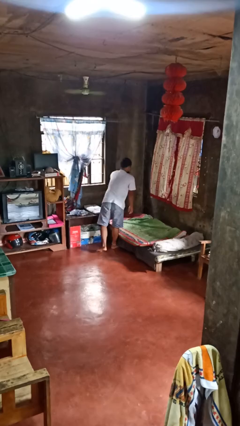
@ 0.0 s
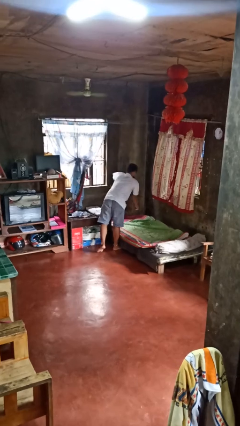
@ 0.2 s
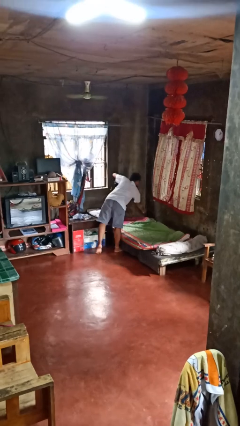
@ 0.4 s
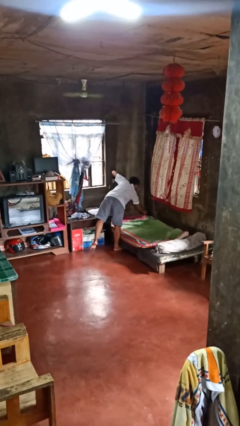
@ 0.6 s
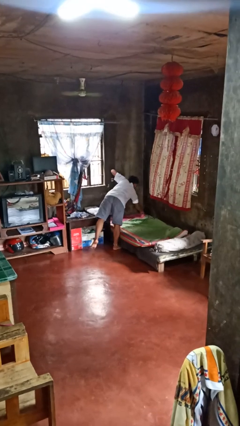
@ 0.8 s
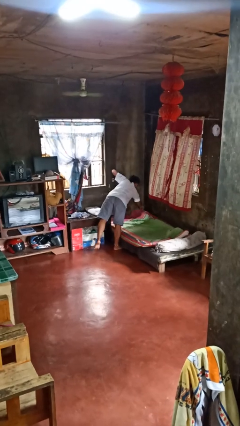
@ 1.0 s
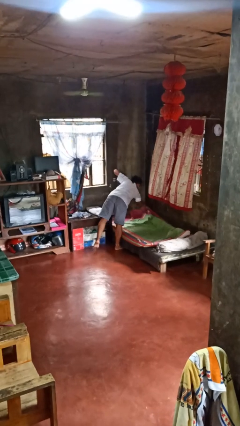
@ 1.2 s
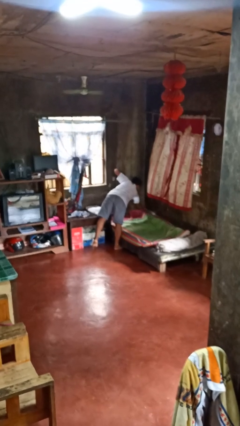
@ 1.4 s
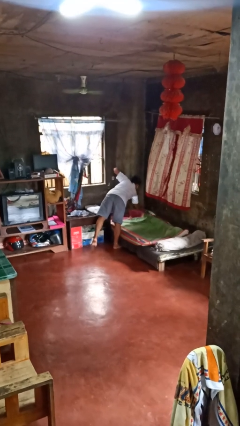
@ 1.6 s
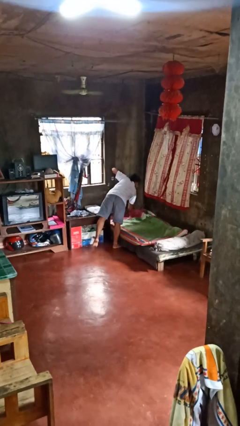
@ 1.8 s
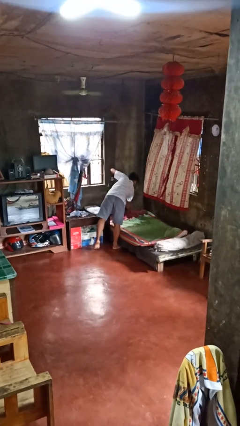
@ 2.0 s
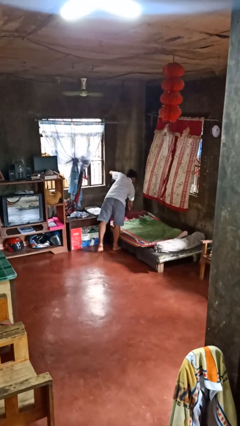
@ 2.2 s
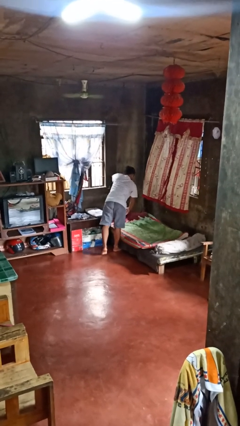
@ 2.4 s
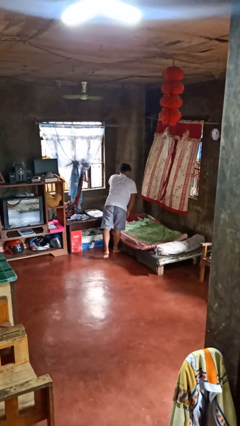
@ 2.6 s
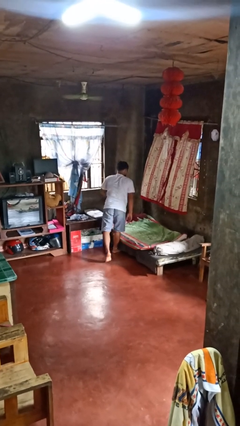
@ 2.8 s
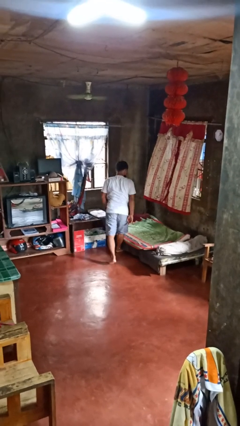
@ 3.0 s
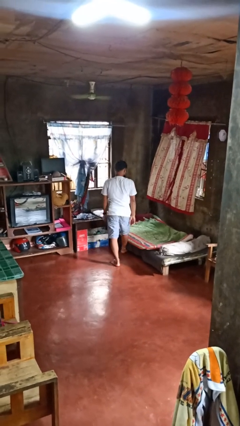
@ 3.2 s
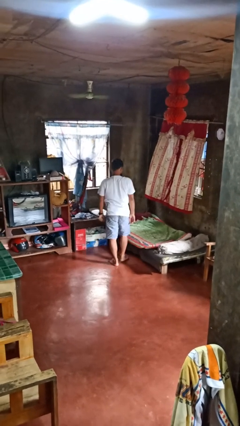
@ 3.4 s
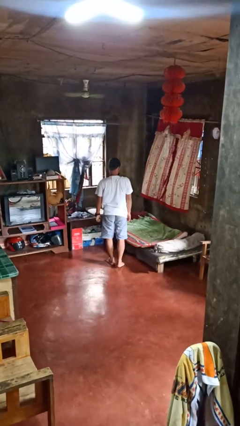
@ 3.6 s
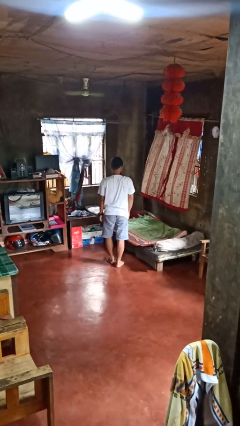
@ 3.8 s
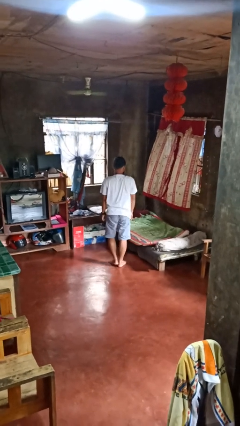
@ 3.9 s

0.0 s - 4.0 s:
person makes bed

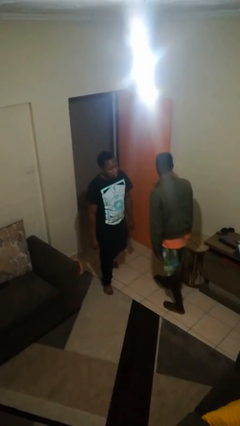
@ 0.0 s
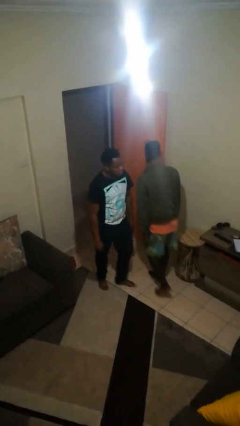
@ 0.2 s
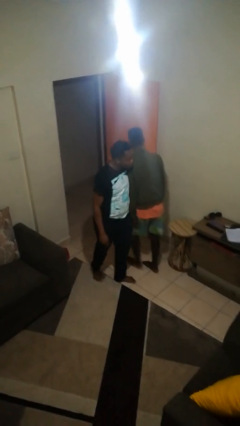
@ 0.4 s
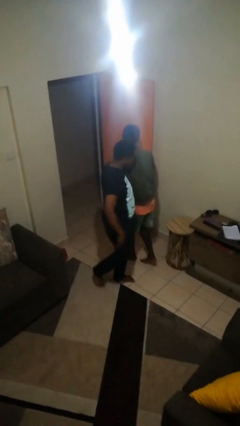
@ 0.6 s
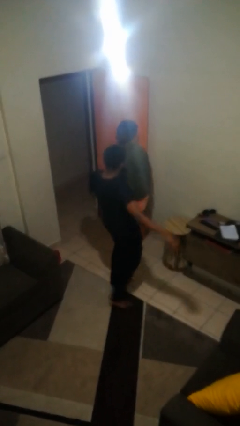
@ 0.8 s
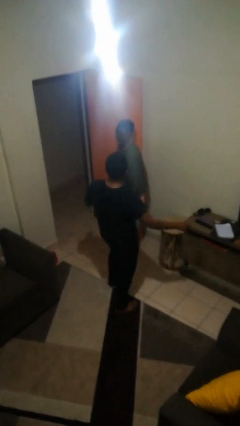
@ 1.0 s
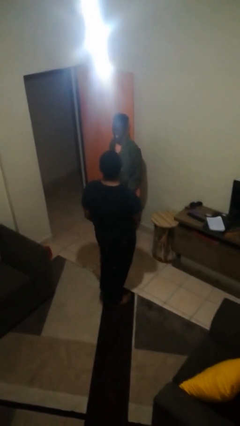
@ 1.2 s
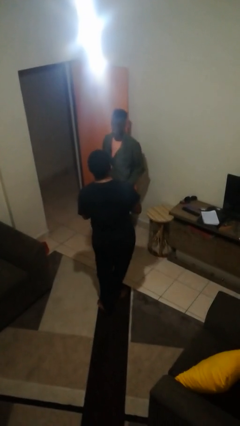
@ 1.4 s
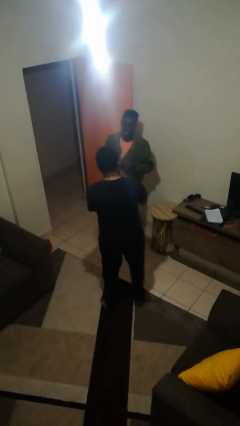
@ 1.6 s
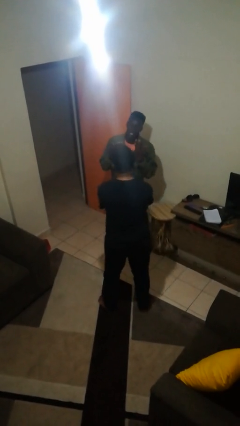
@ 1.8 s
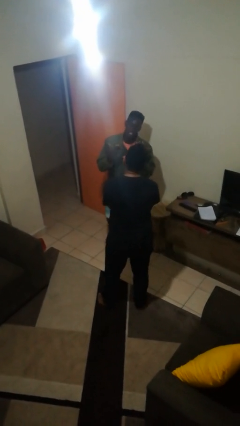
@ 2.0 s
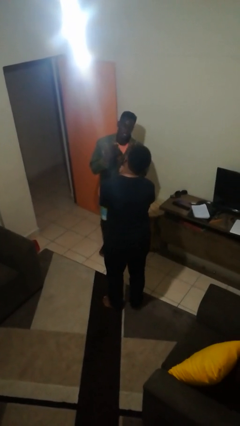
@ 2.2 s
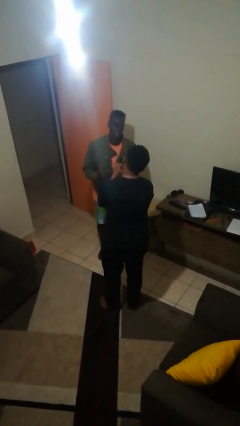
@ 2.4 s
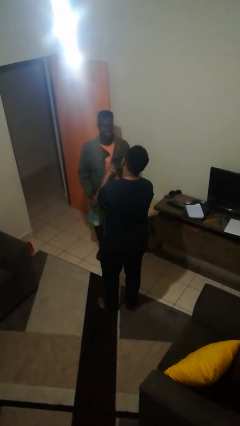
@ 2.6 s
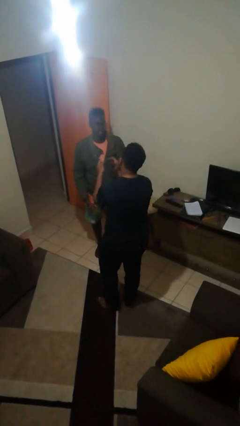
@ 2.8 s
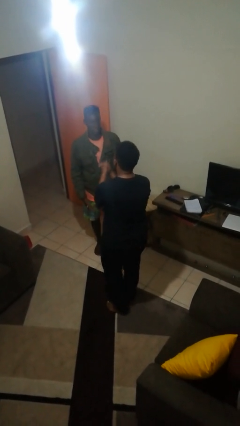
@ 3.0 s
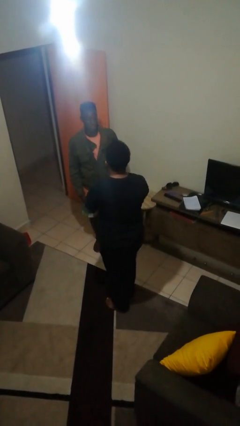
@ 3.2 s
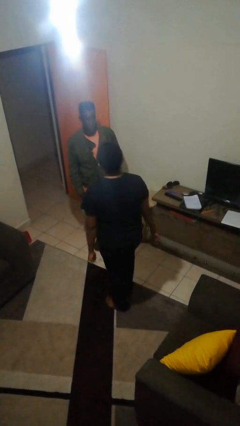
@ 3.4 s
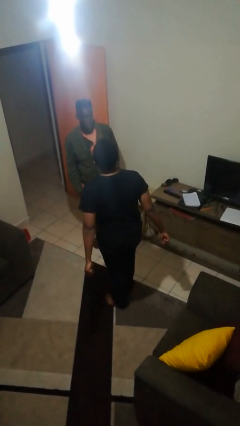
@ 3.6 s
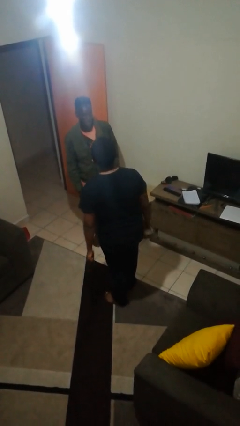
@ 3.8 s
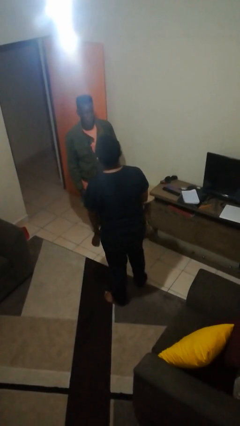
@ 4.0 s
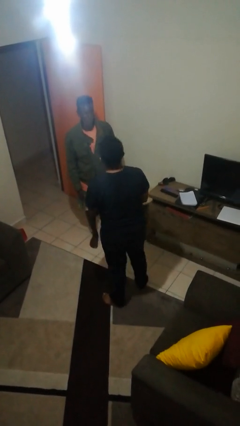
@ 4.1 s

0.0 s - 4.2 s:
person bumps into person

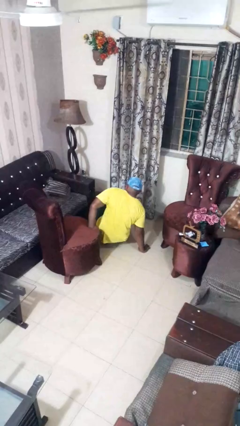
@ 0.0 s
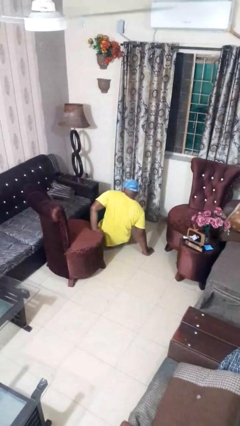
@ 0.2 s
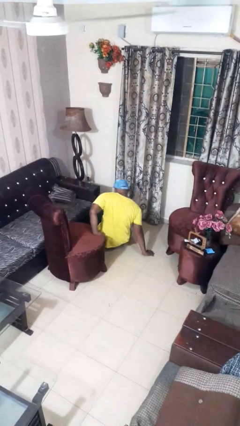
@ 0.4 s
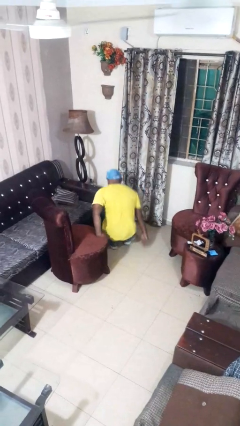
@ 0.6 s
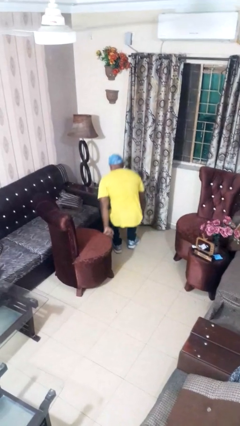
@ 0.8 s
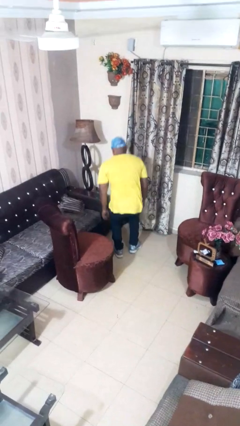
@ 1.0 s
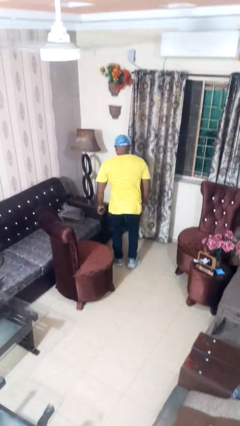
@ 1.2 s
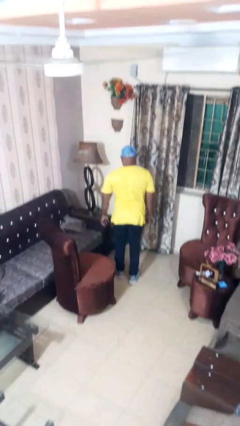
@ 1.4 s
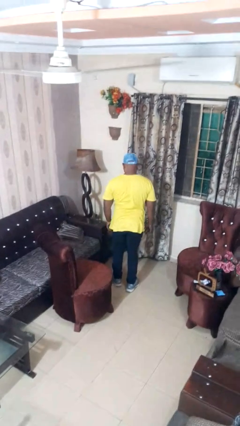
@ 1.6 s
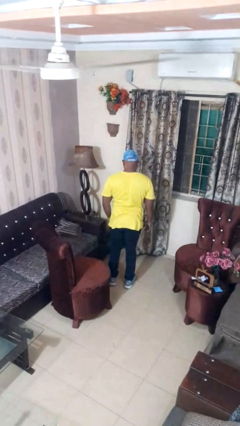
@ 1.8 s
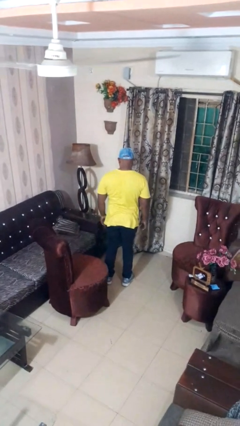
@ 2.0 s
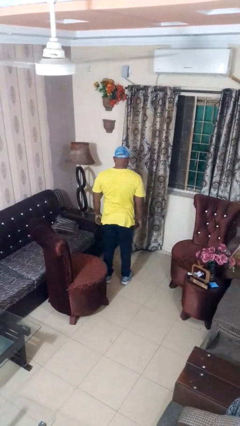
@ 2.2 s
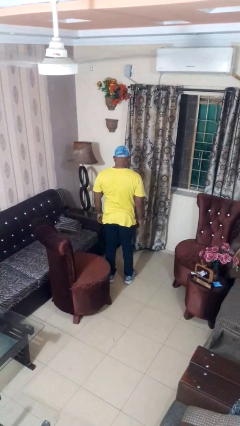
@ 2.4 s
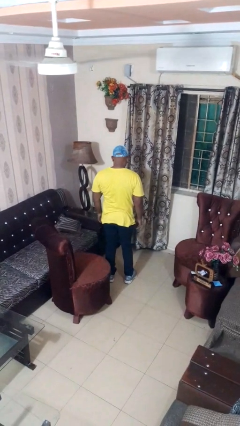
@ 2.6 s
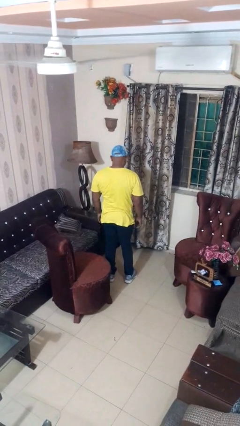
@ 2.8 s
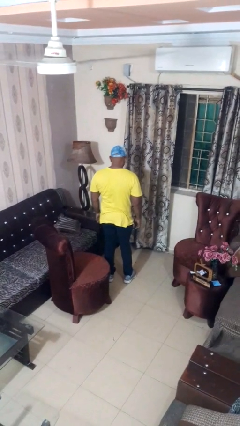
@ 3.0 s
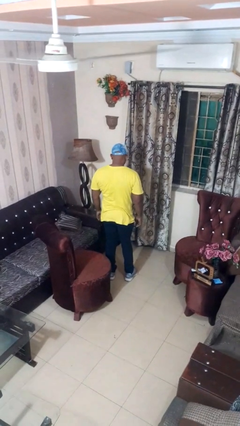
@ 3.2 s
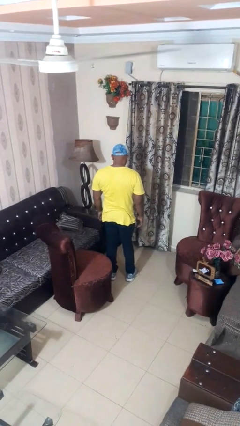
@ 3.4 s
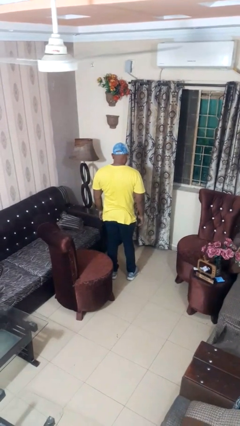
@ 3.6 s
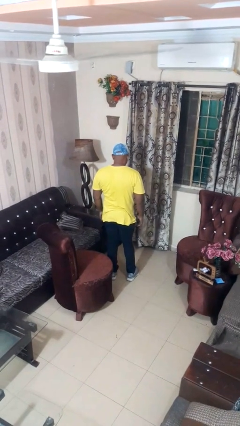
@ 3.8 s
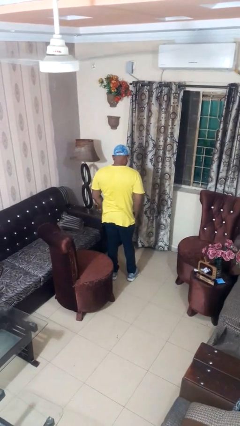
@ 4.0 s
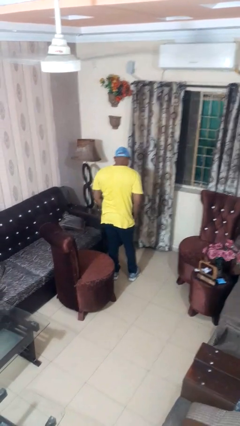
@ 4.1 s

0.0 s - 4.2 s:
person stands up from floor

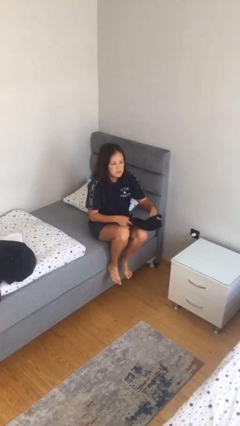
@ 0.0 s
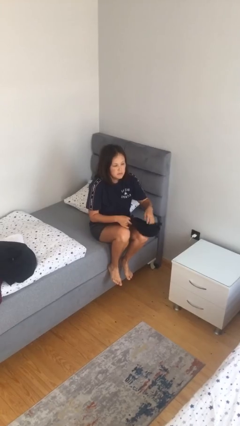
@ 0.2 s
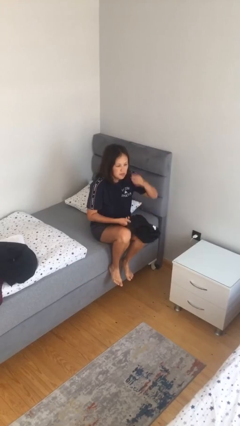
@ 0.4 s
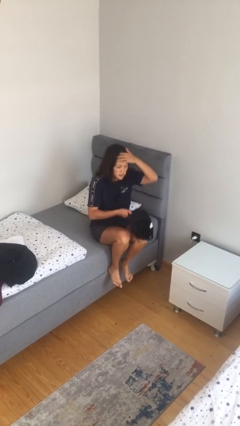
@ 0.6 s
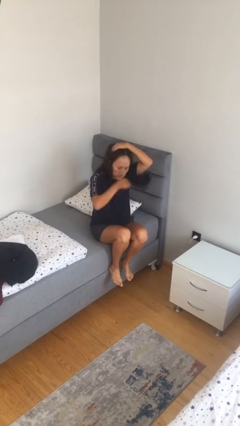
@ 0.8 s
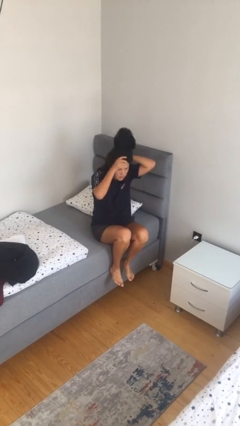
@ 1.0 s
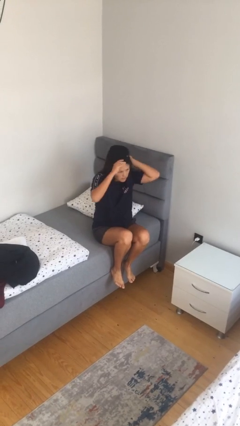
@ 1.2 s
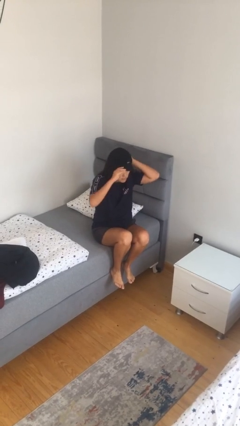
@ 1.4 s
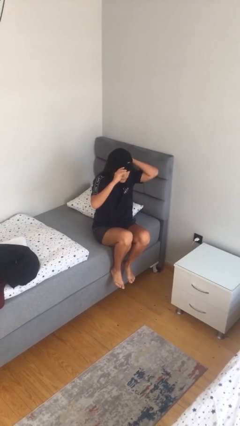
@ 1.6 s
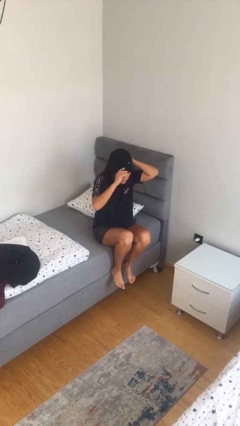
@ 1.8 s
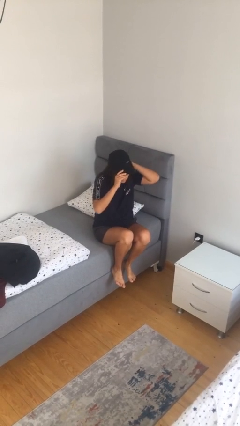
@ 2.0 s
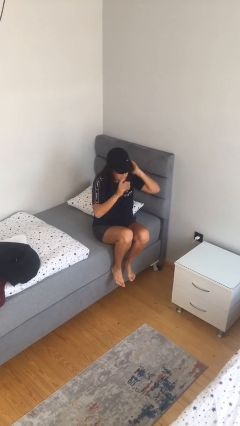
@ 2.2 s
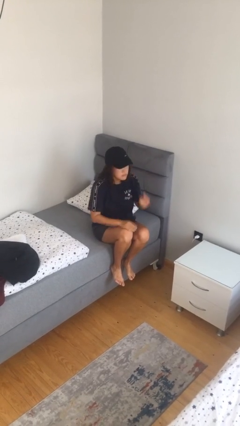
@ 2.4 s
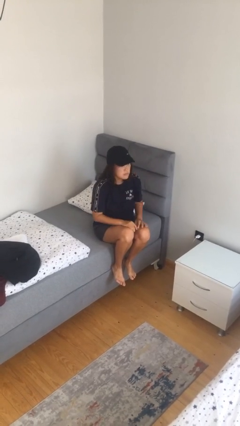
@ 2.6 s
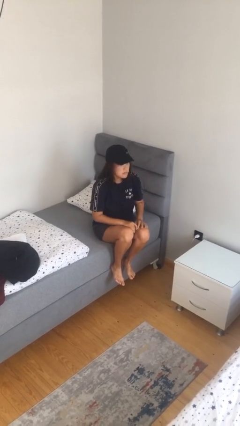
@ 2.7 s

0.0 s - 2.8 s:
person puts on hat

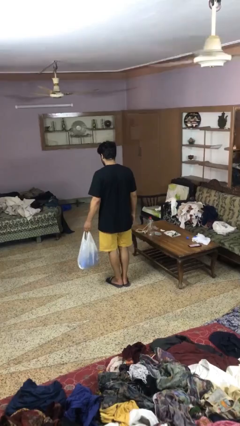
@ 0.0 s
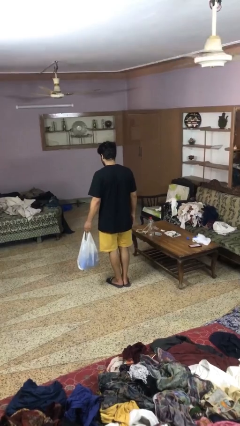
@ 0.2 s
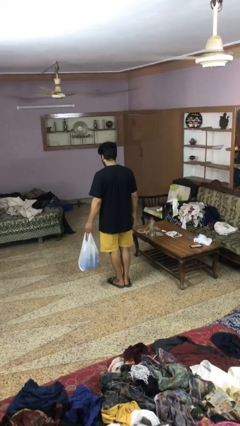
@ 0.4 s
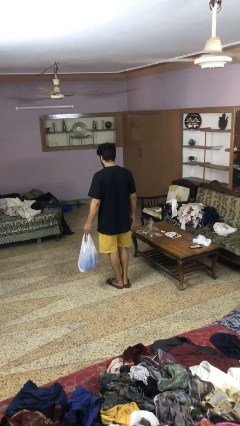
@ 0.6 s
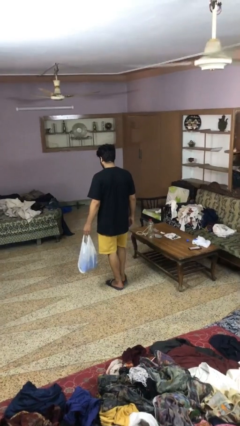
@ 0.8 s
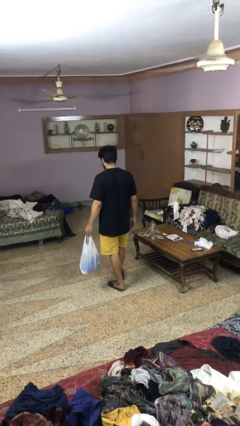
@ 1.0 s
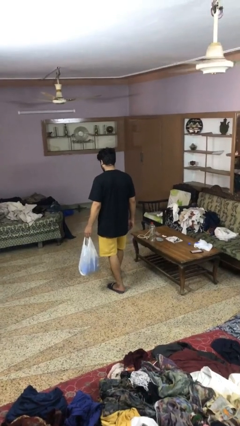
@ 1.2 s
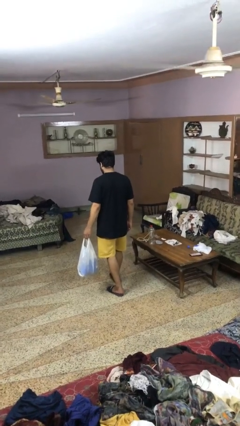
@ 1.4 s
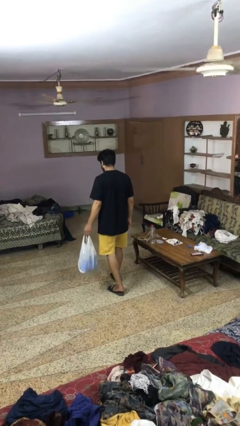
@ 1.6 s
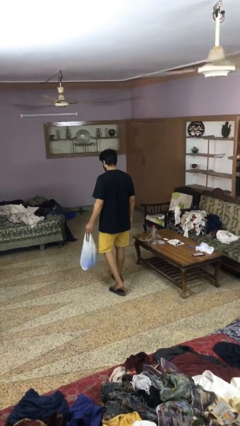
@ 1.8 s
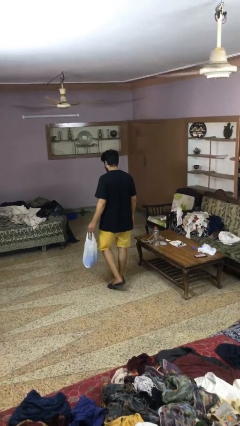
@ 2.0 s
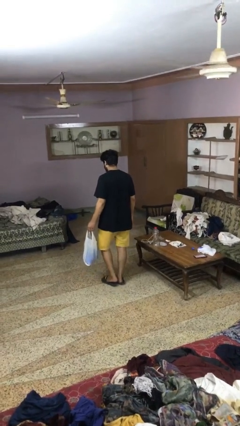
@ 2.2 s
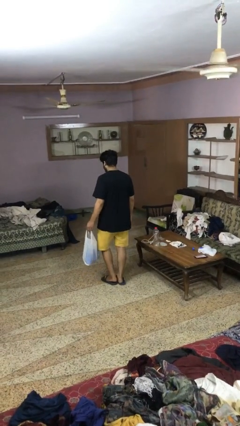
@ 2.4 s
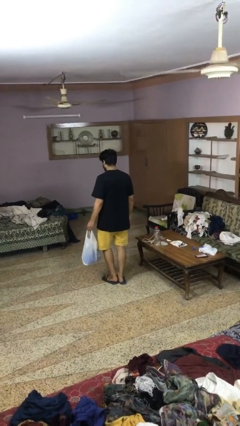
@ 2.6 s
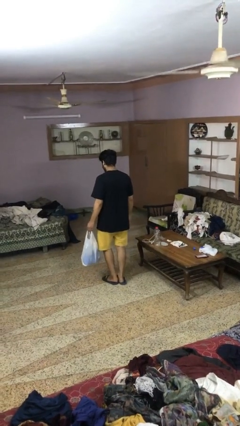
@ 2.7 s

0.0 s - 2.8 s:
person carries groceries
